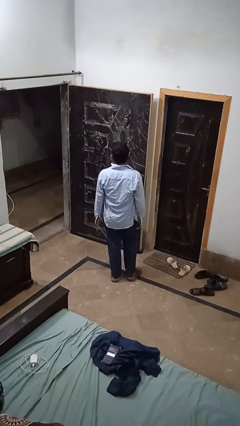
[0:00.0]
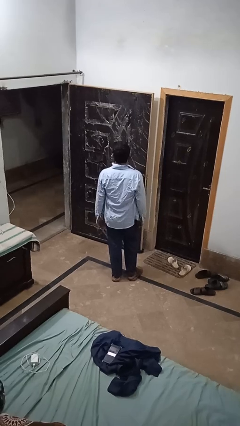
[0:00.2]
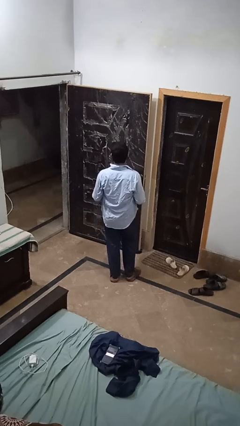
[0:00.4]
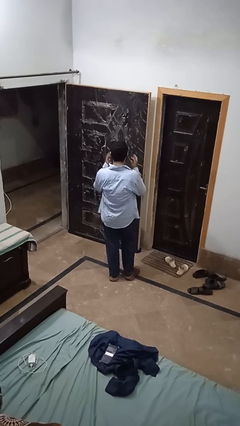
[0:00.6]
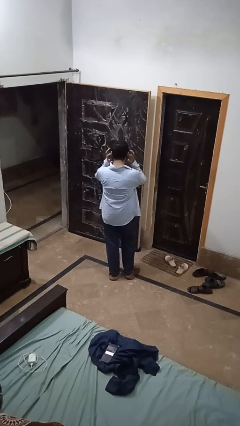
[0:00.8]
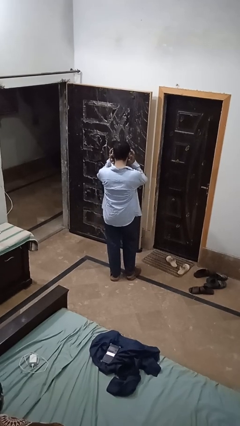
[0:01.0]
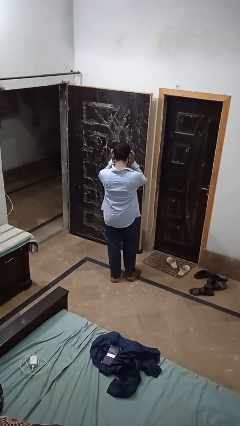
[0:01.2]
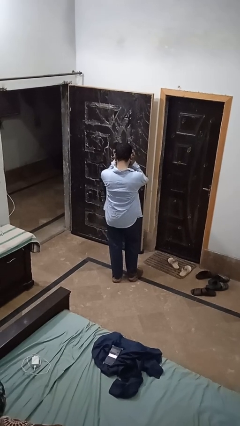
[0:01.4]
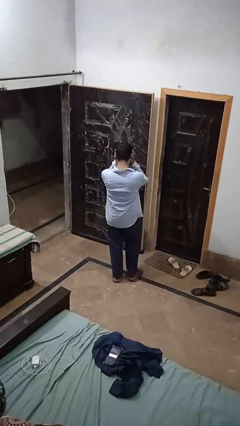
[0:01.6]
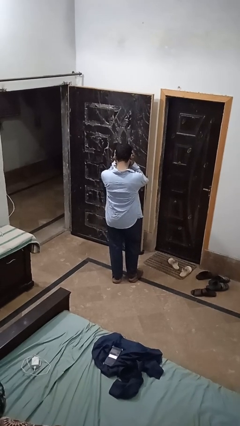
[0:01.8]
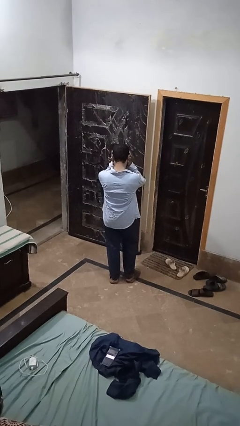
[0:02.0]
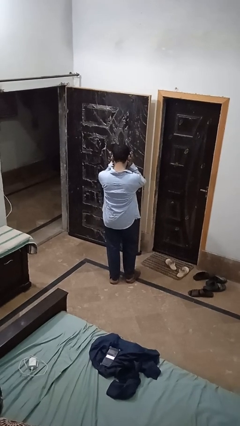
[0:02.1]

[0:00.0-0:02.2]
person puts fingers in ear

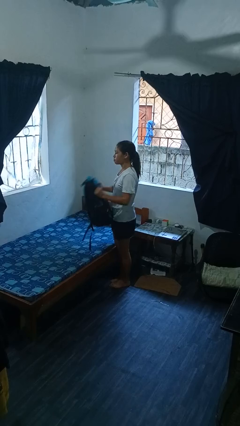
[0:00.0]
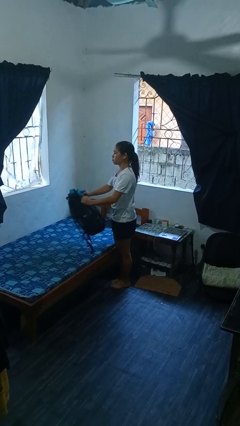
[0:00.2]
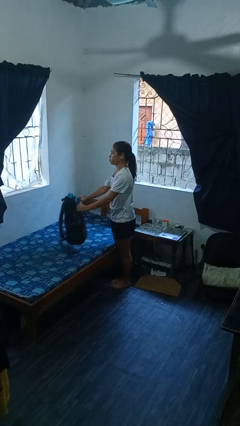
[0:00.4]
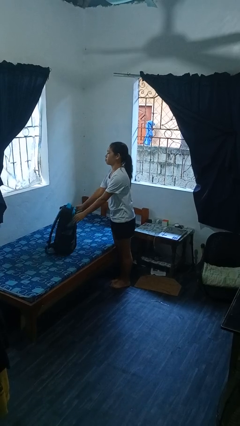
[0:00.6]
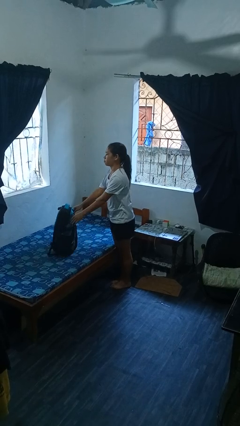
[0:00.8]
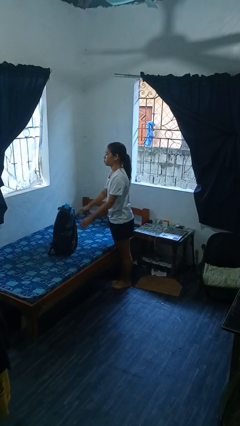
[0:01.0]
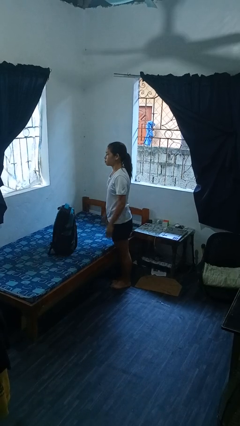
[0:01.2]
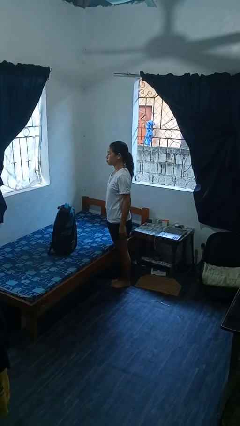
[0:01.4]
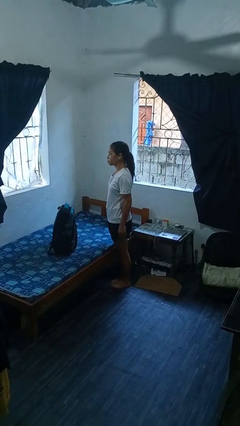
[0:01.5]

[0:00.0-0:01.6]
person puts down object on bed

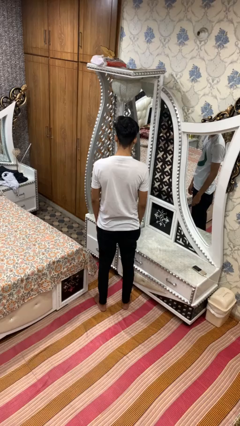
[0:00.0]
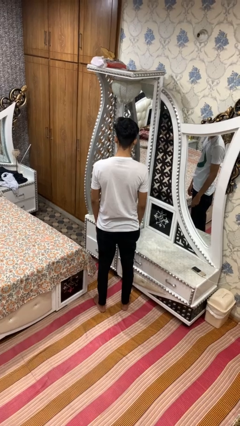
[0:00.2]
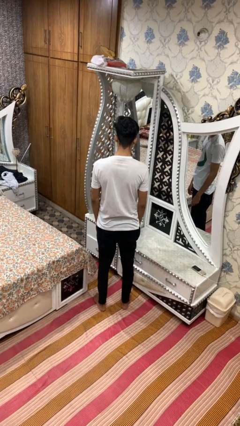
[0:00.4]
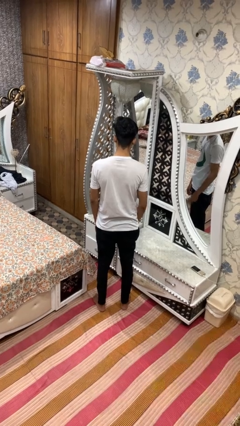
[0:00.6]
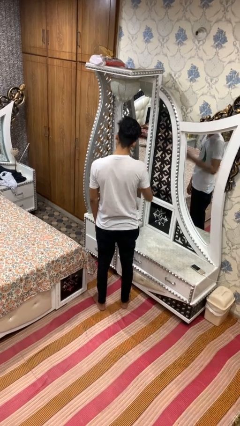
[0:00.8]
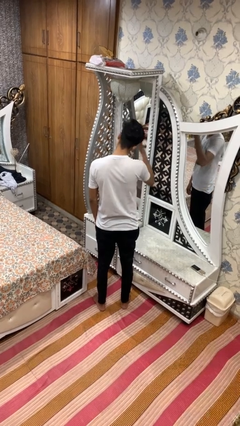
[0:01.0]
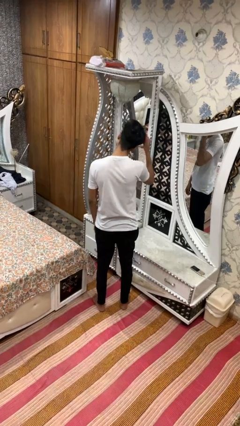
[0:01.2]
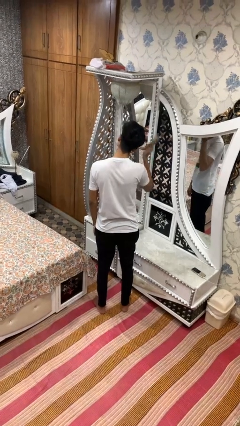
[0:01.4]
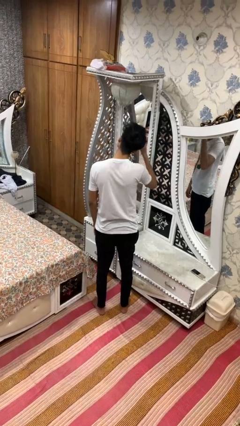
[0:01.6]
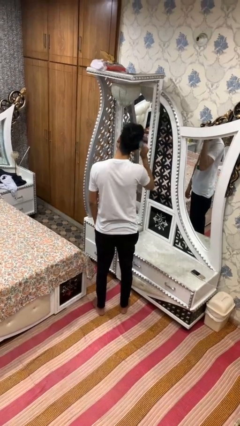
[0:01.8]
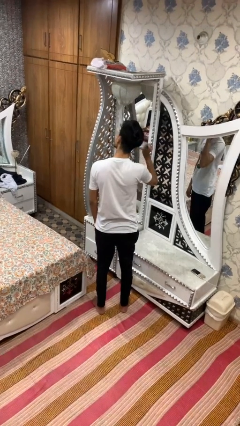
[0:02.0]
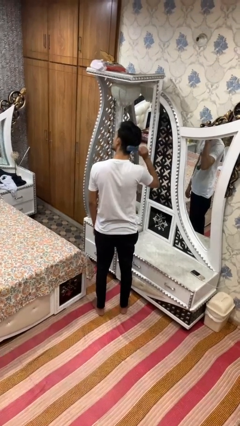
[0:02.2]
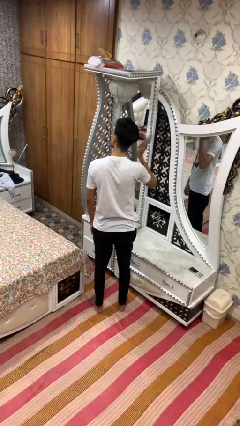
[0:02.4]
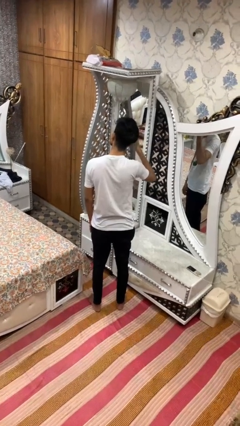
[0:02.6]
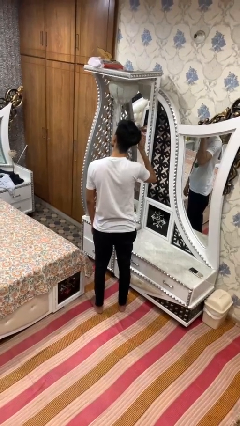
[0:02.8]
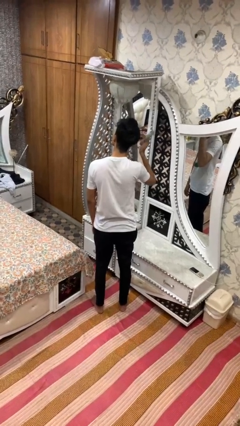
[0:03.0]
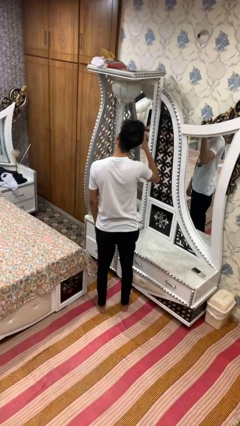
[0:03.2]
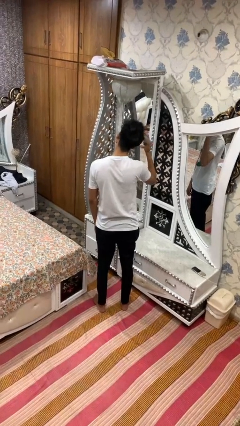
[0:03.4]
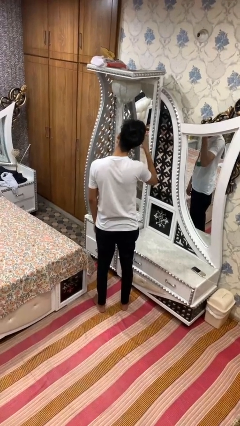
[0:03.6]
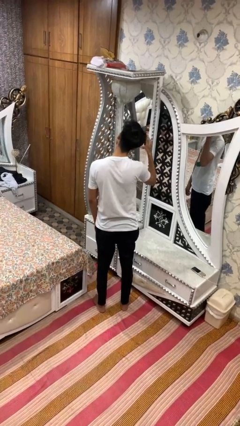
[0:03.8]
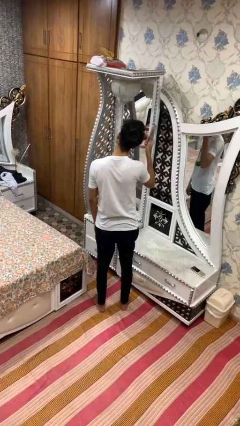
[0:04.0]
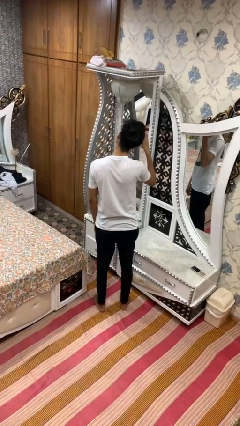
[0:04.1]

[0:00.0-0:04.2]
person brushes hair

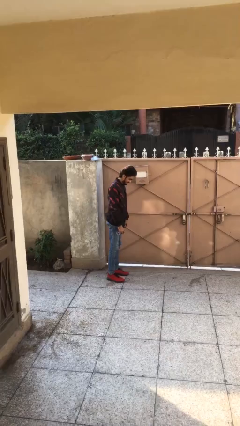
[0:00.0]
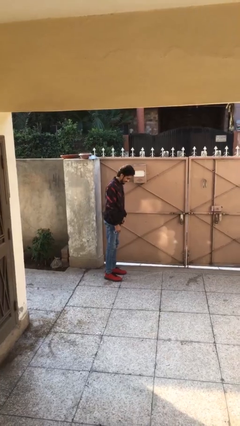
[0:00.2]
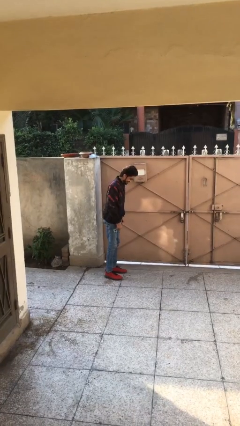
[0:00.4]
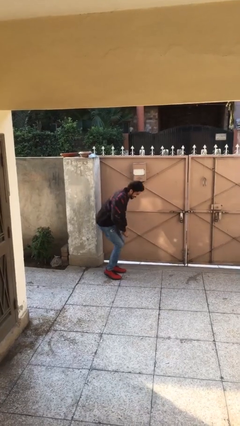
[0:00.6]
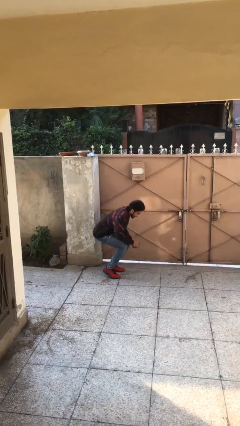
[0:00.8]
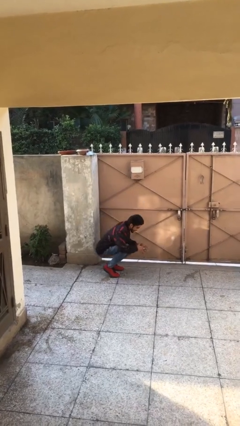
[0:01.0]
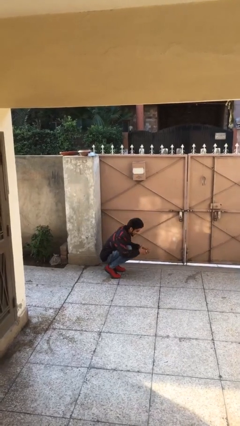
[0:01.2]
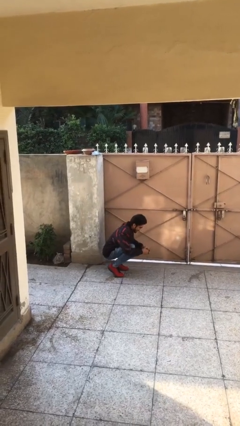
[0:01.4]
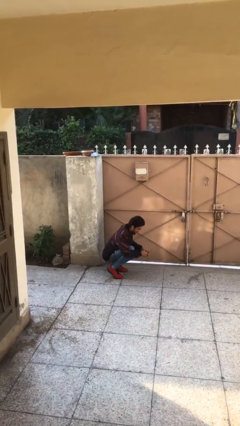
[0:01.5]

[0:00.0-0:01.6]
person sits down

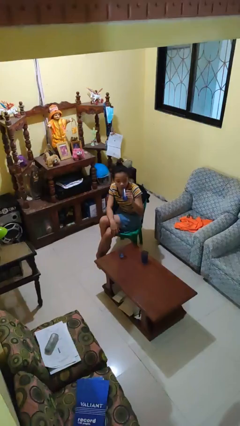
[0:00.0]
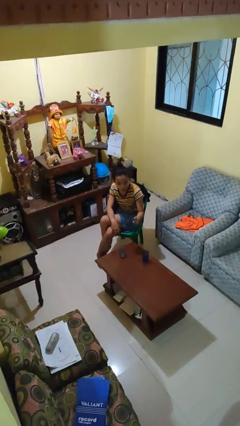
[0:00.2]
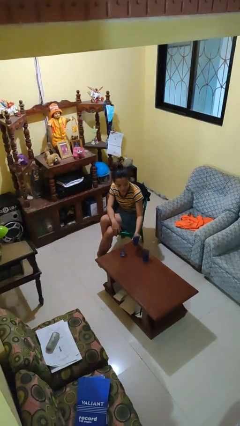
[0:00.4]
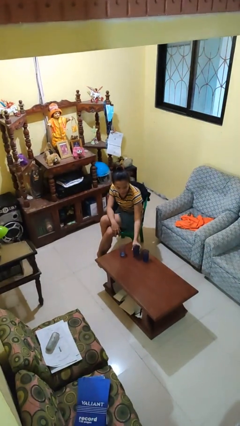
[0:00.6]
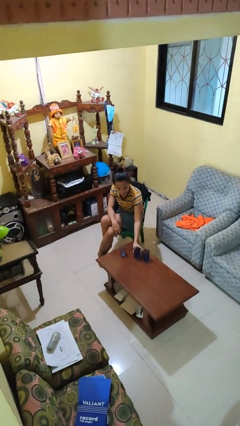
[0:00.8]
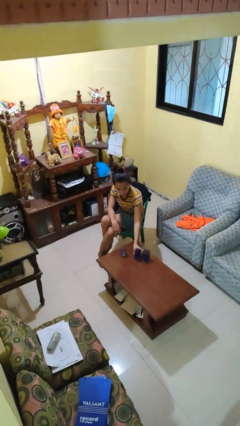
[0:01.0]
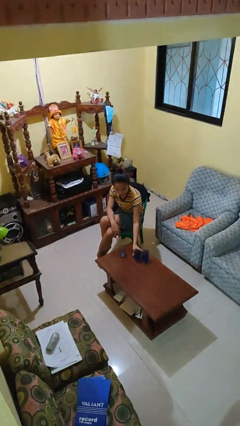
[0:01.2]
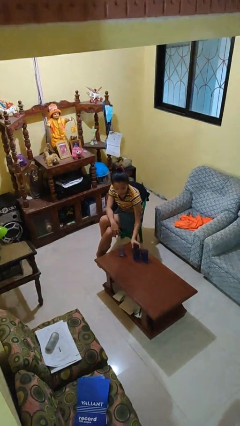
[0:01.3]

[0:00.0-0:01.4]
person puts down object on table

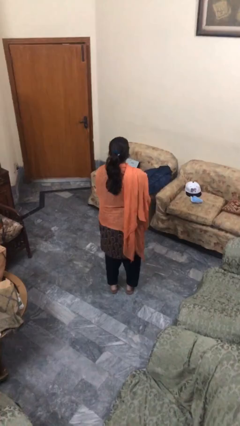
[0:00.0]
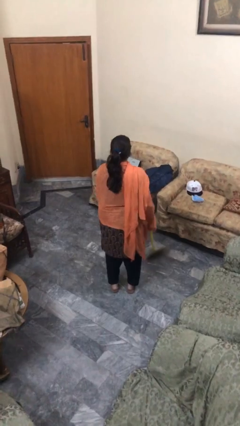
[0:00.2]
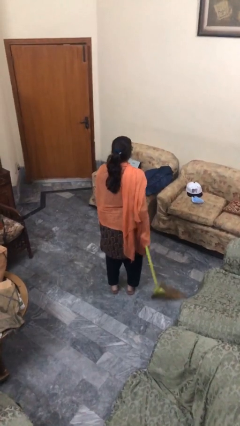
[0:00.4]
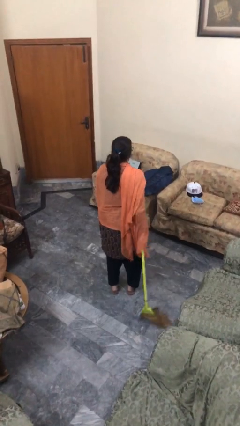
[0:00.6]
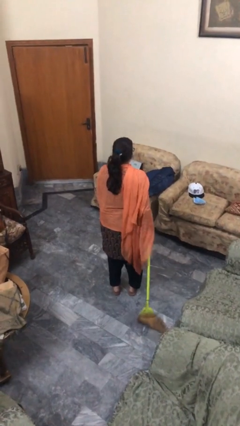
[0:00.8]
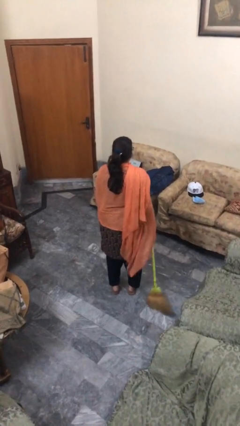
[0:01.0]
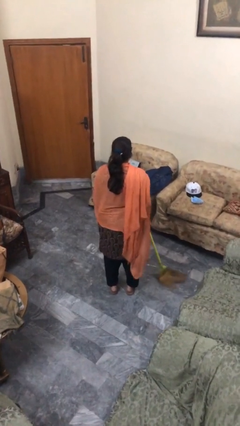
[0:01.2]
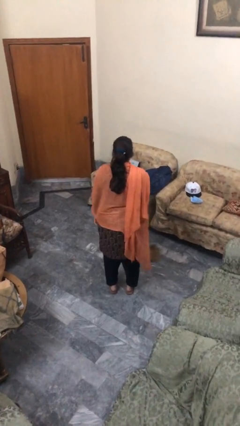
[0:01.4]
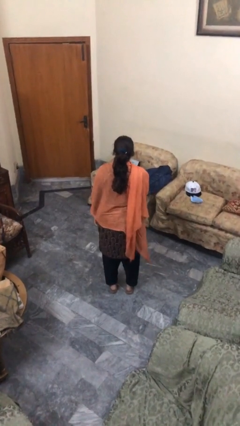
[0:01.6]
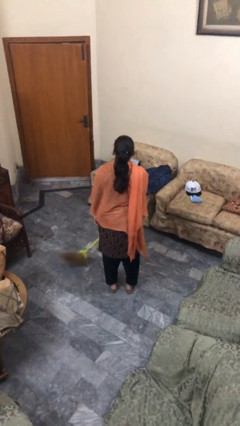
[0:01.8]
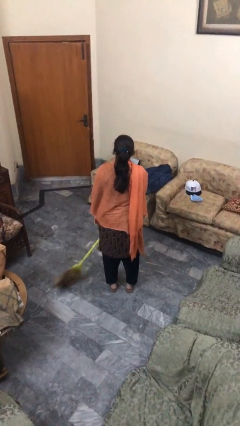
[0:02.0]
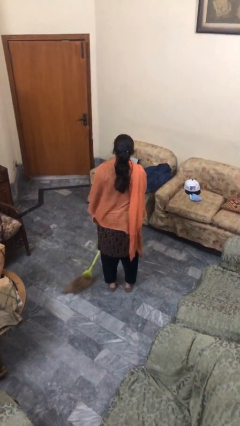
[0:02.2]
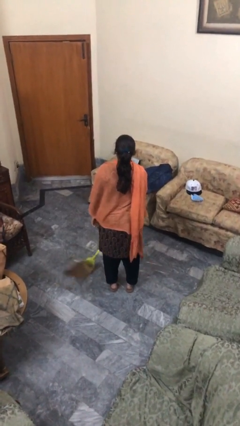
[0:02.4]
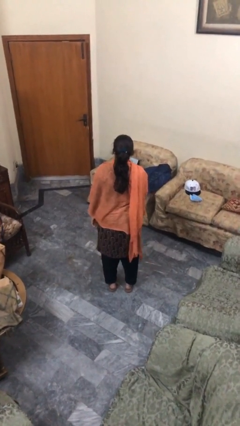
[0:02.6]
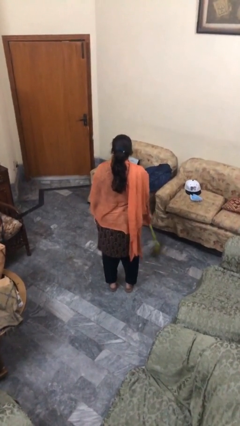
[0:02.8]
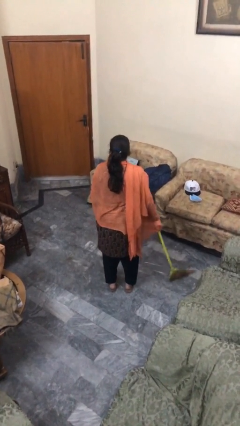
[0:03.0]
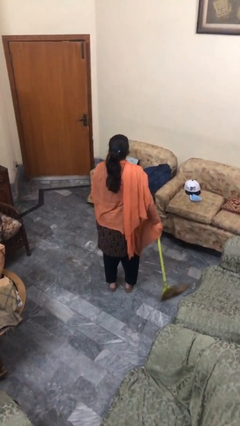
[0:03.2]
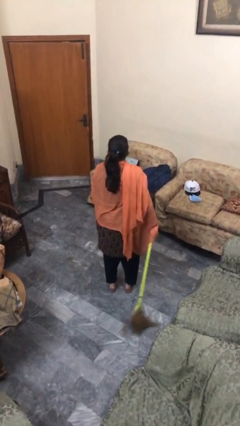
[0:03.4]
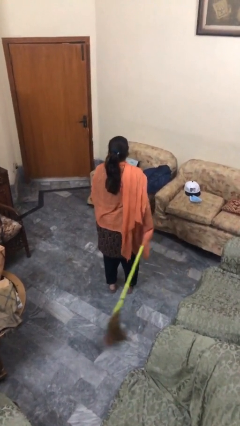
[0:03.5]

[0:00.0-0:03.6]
person sweeps floor

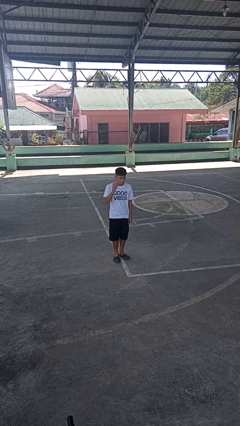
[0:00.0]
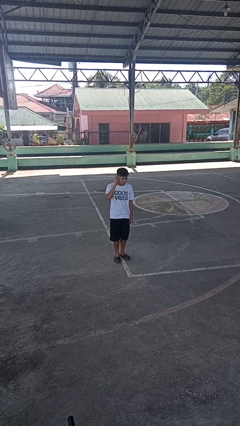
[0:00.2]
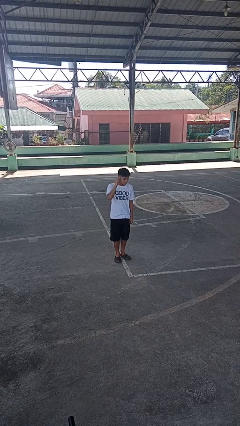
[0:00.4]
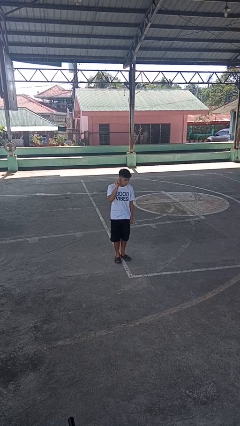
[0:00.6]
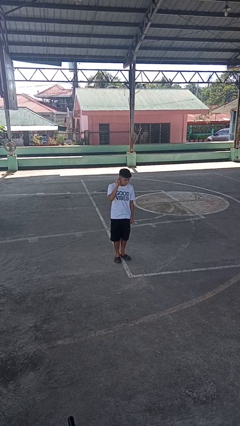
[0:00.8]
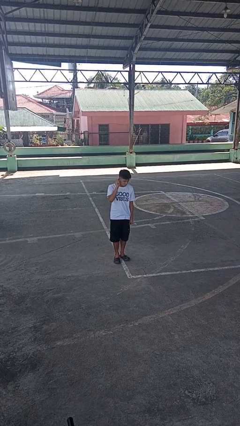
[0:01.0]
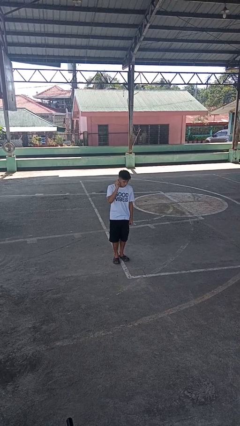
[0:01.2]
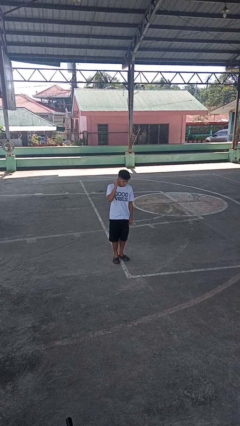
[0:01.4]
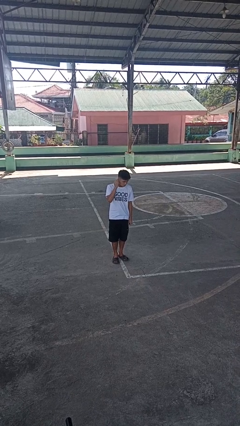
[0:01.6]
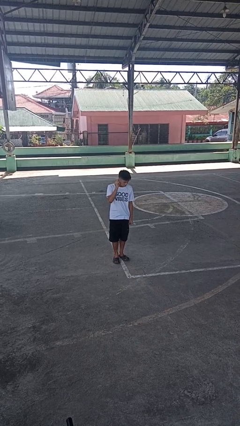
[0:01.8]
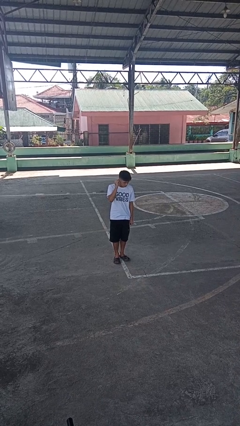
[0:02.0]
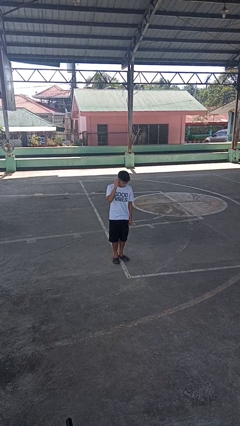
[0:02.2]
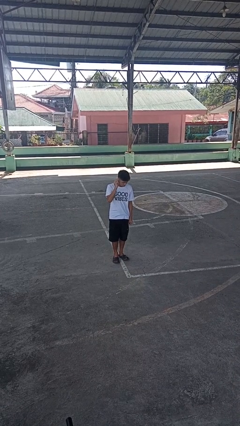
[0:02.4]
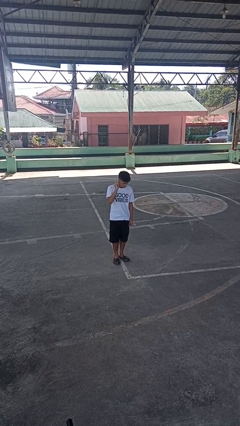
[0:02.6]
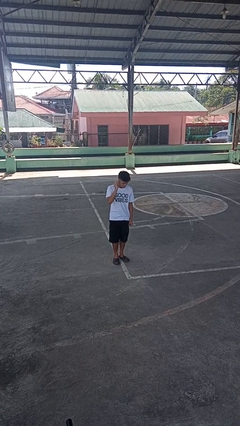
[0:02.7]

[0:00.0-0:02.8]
person touches earlobe
